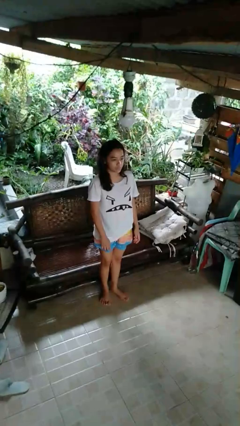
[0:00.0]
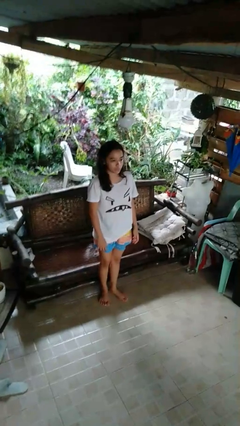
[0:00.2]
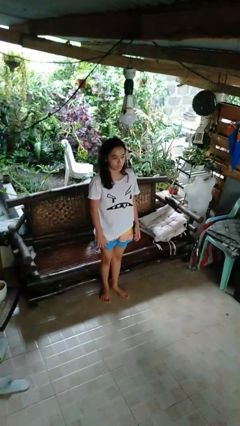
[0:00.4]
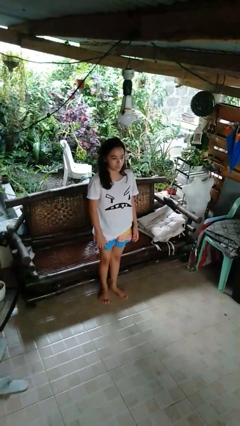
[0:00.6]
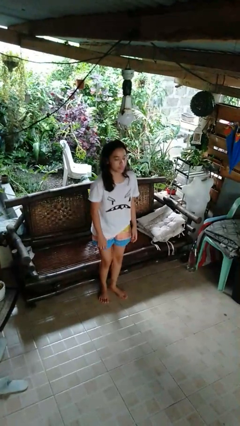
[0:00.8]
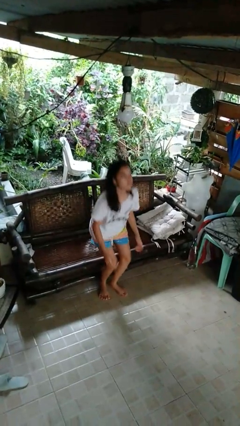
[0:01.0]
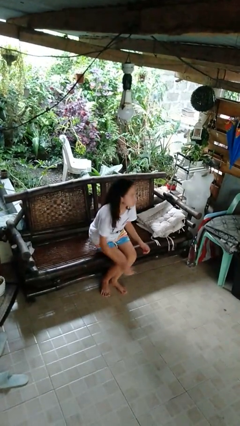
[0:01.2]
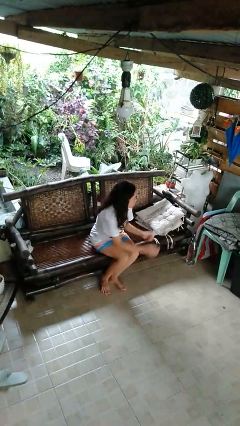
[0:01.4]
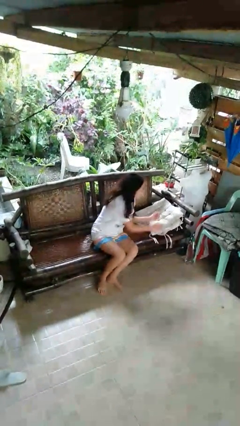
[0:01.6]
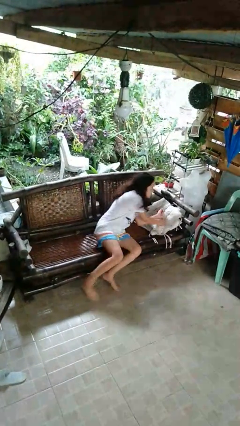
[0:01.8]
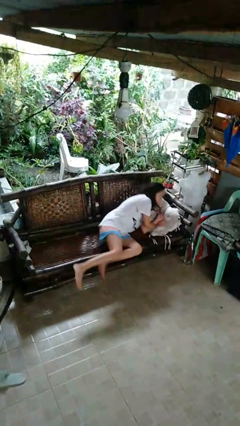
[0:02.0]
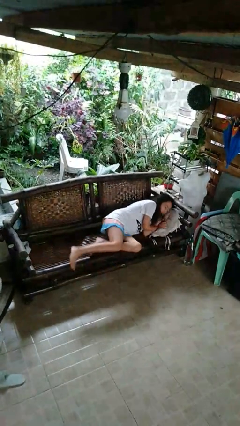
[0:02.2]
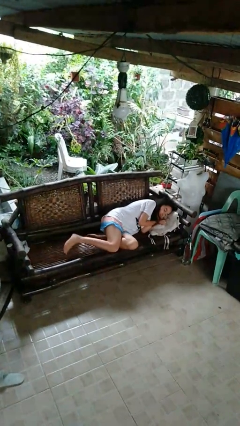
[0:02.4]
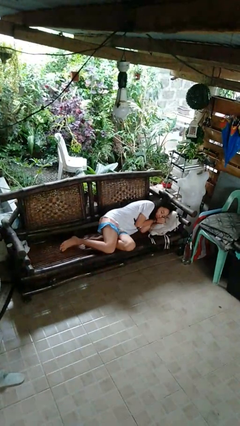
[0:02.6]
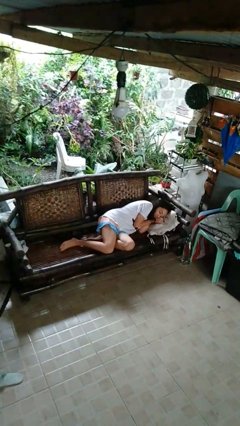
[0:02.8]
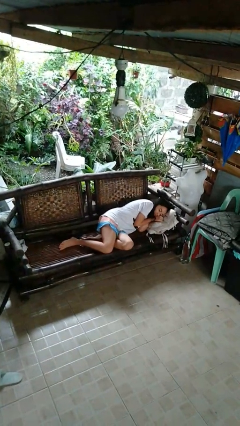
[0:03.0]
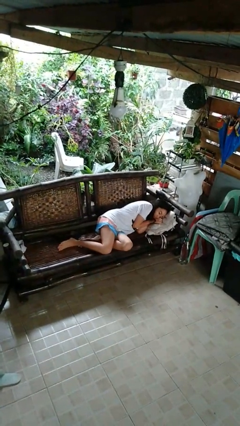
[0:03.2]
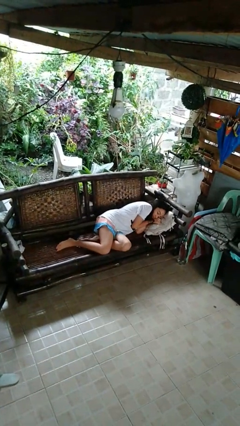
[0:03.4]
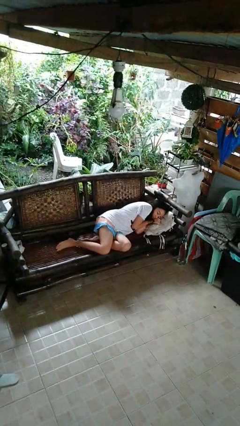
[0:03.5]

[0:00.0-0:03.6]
person lies down on couch

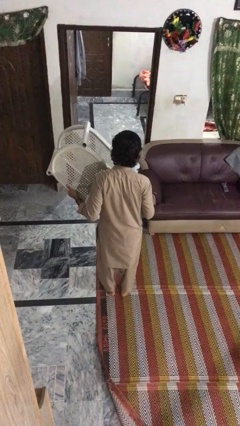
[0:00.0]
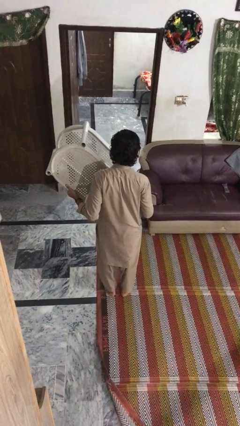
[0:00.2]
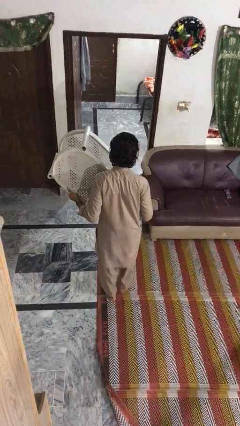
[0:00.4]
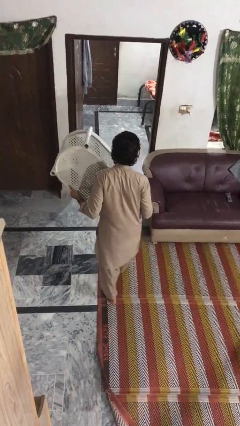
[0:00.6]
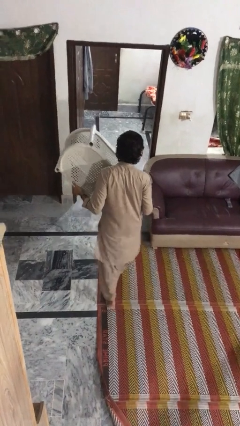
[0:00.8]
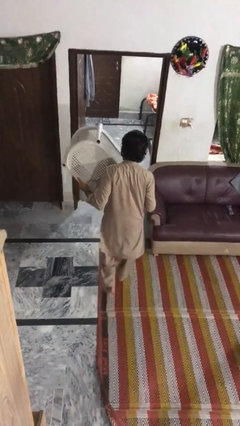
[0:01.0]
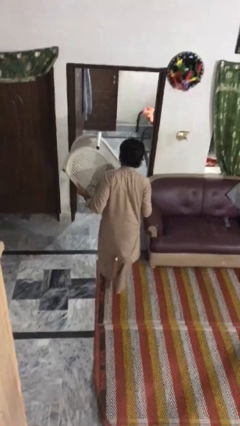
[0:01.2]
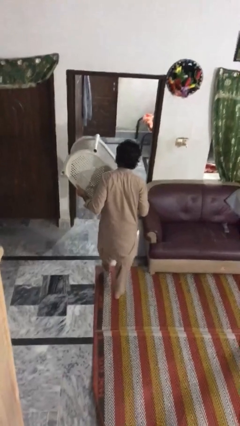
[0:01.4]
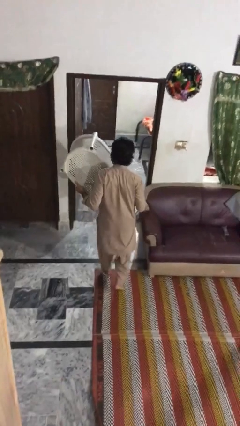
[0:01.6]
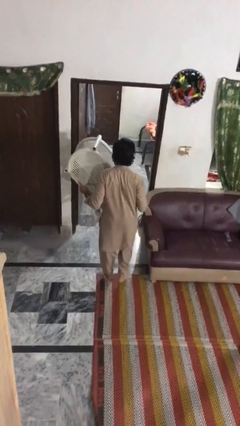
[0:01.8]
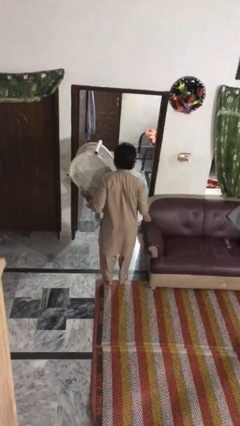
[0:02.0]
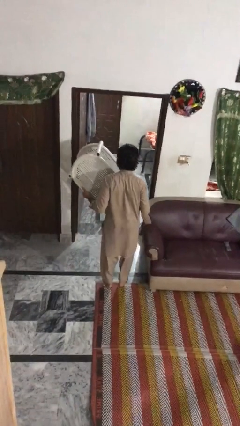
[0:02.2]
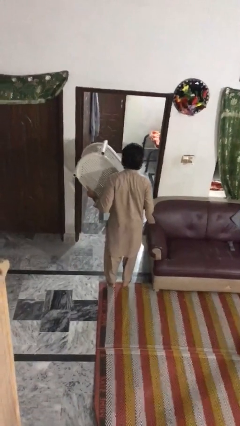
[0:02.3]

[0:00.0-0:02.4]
person carries furniture

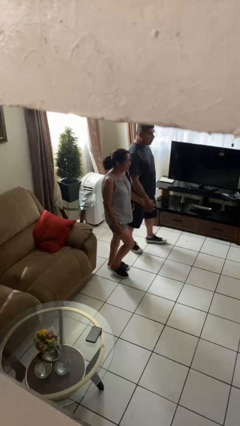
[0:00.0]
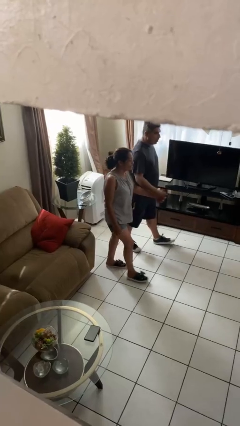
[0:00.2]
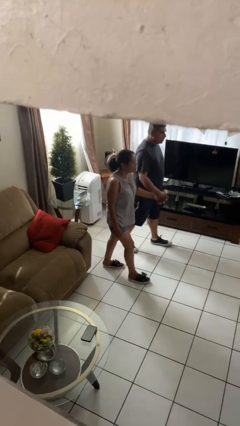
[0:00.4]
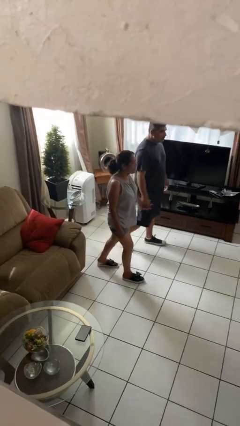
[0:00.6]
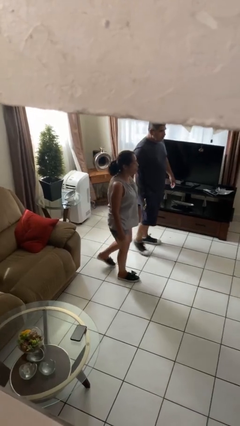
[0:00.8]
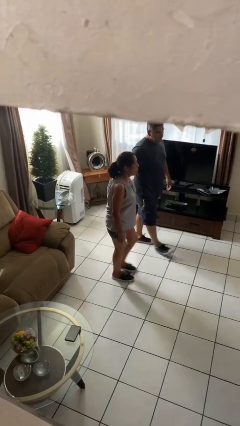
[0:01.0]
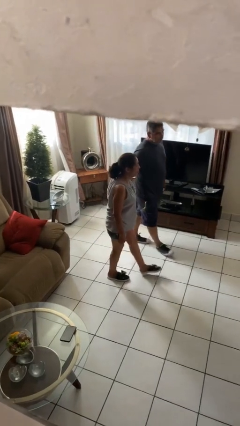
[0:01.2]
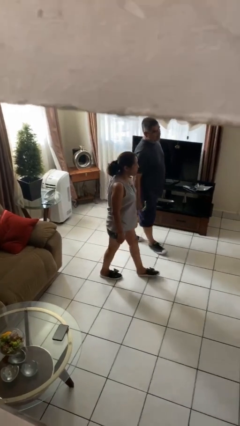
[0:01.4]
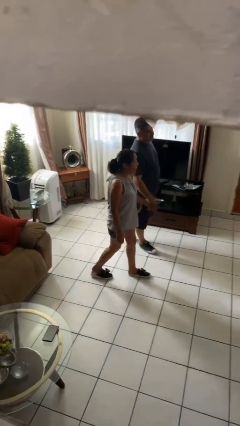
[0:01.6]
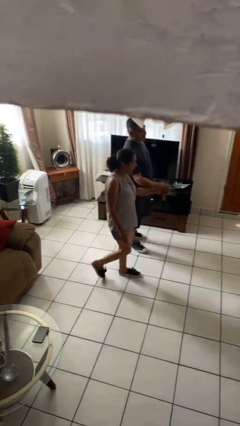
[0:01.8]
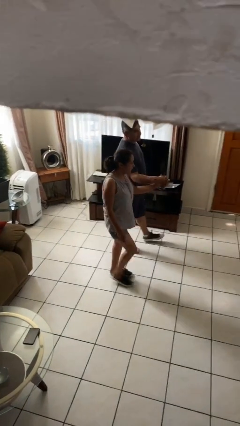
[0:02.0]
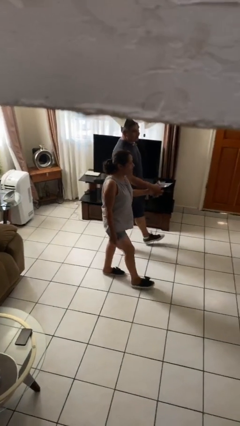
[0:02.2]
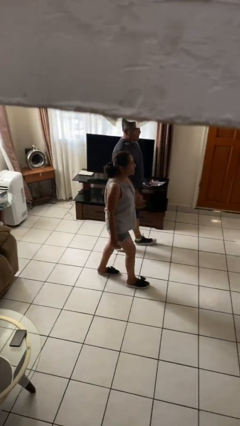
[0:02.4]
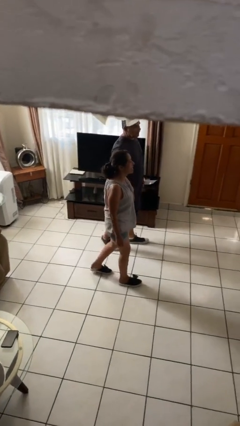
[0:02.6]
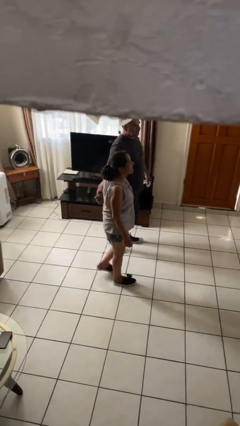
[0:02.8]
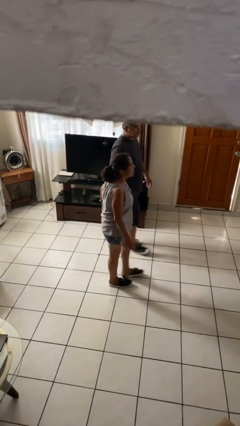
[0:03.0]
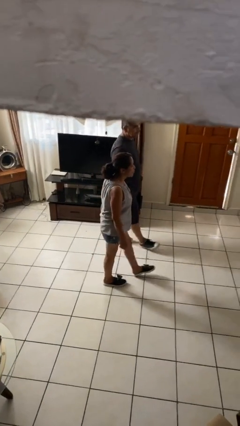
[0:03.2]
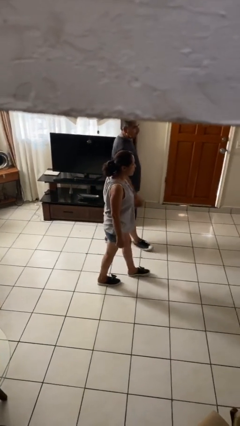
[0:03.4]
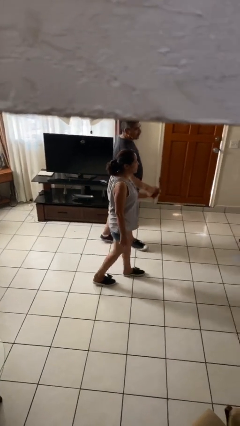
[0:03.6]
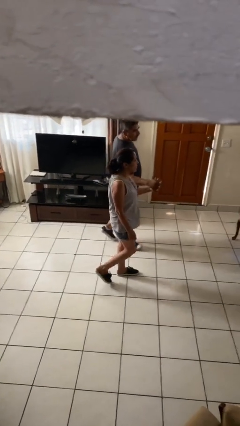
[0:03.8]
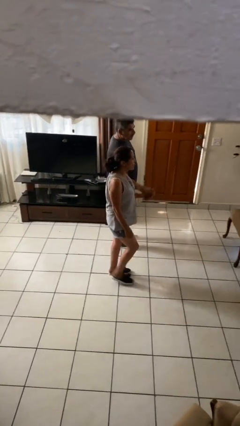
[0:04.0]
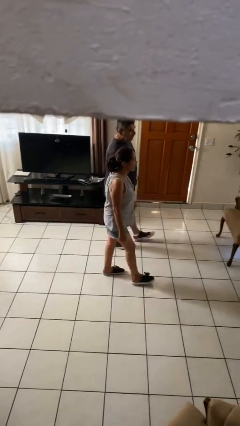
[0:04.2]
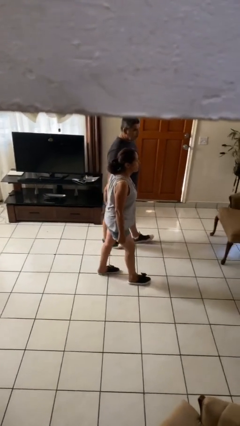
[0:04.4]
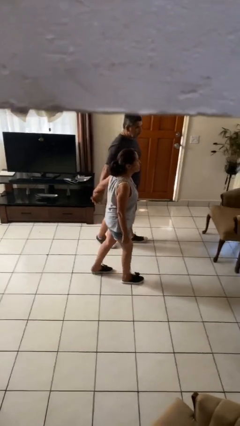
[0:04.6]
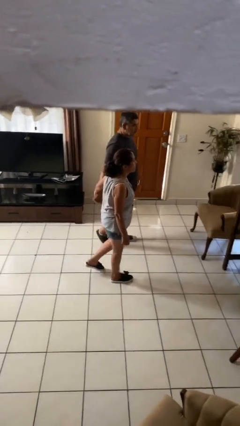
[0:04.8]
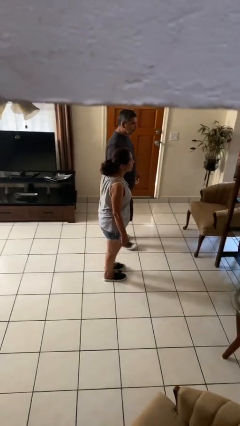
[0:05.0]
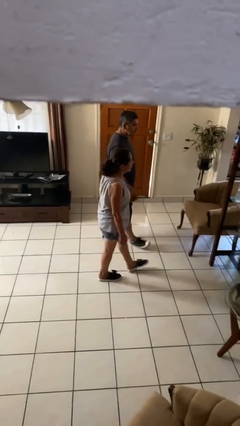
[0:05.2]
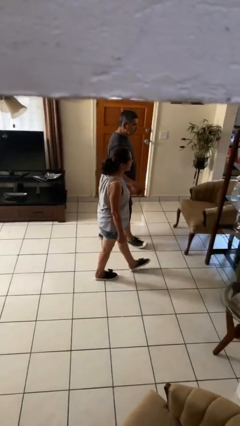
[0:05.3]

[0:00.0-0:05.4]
person holds hand

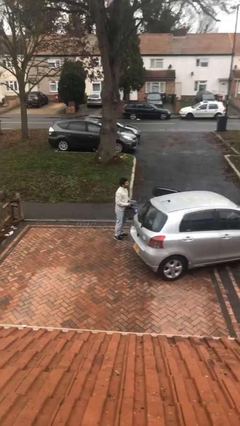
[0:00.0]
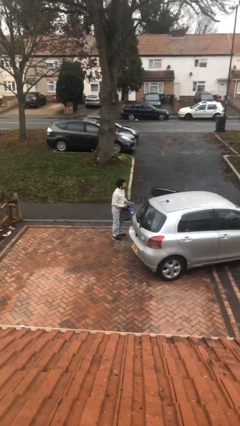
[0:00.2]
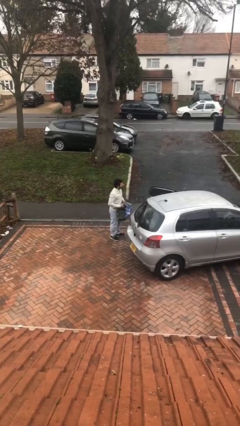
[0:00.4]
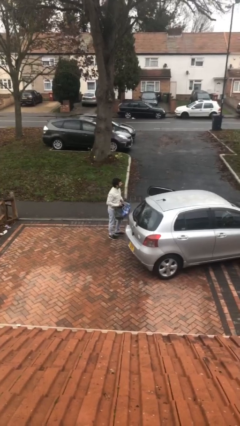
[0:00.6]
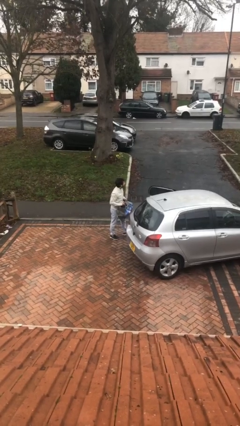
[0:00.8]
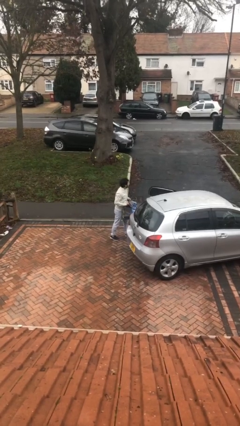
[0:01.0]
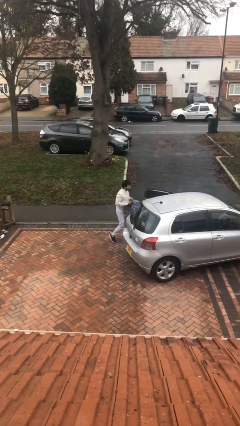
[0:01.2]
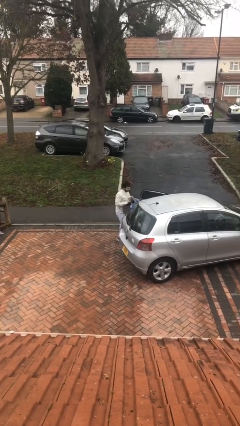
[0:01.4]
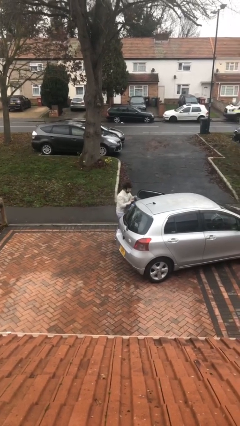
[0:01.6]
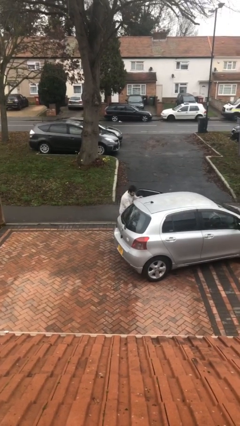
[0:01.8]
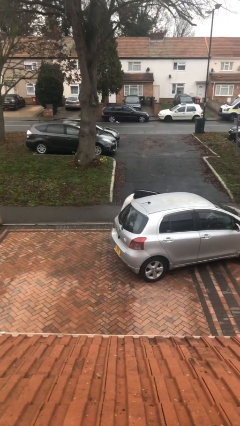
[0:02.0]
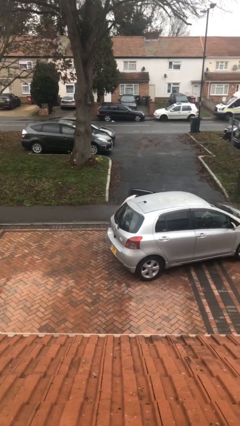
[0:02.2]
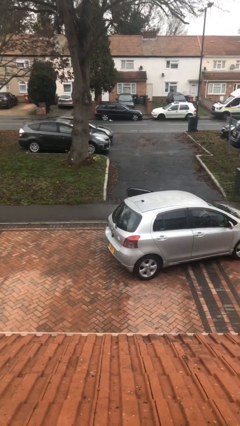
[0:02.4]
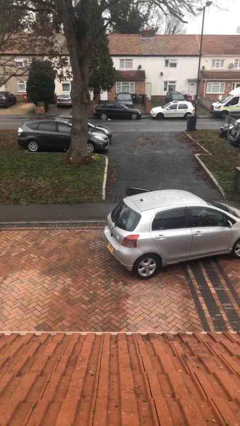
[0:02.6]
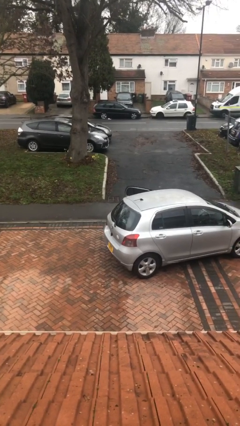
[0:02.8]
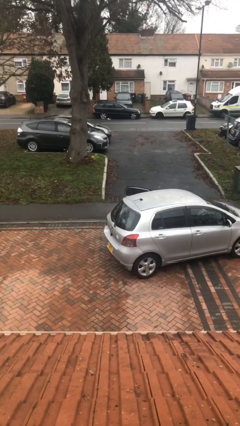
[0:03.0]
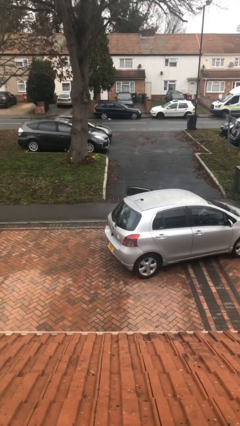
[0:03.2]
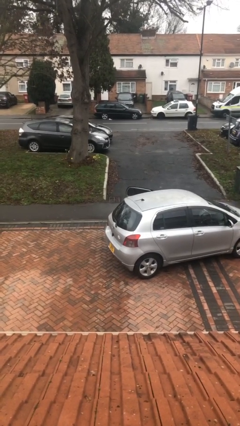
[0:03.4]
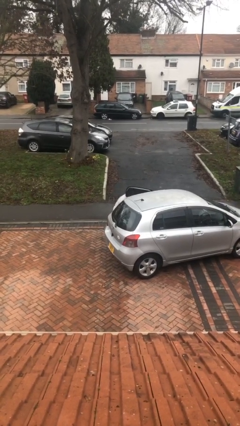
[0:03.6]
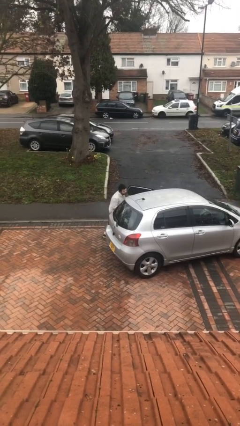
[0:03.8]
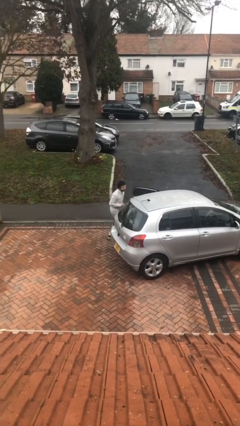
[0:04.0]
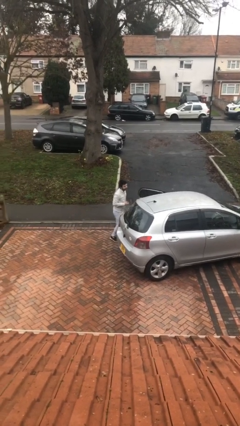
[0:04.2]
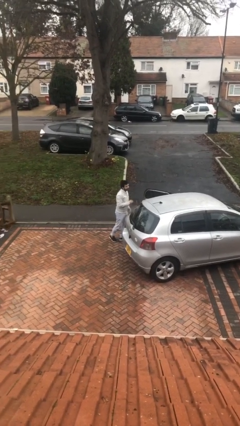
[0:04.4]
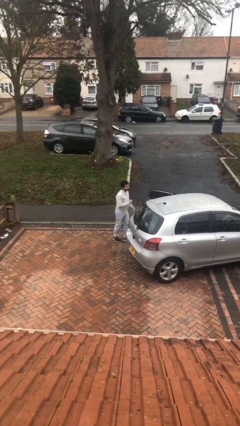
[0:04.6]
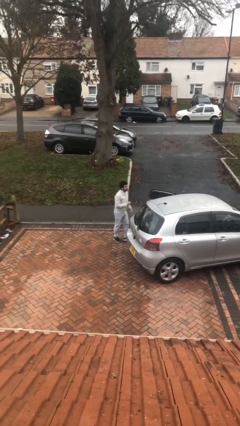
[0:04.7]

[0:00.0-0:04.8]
person loads car

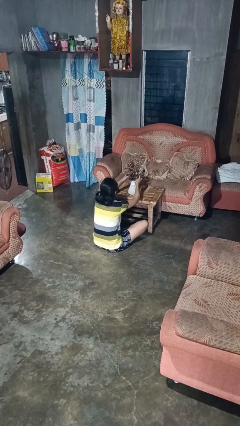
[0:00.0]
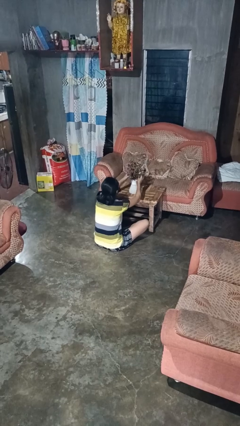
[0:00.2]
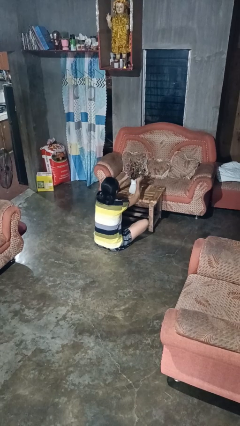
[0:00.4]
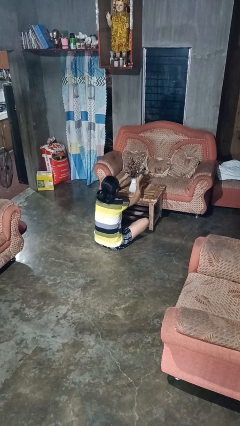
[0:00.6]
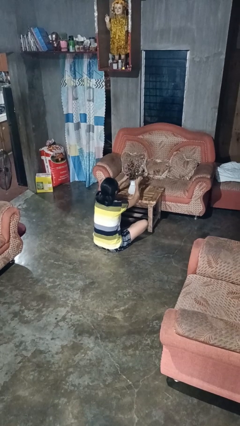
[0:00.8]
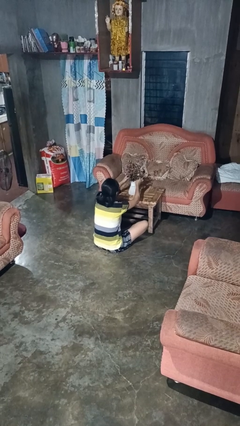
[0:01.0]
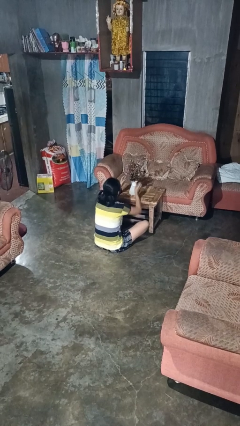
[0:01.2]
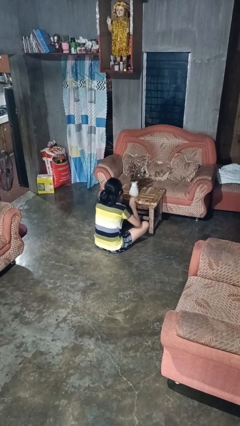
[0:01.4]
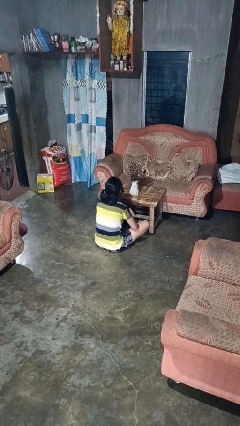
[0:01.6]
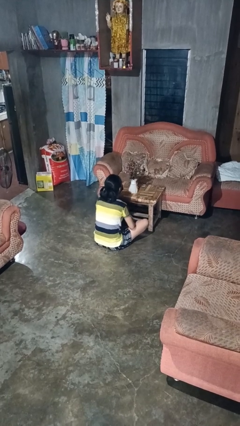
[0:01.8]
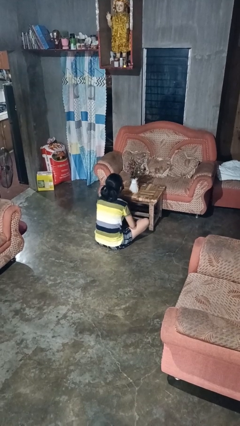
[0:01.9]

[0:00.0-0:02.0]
person arranges flowers in vase
